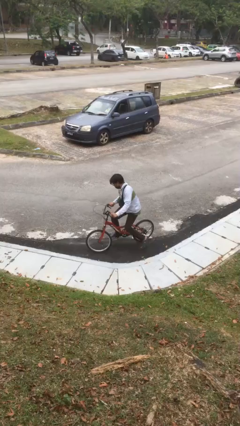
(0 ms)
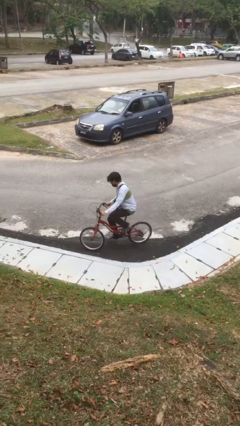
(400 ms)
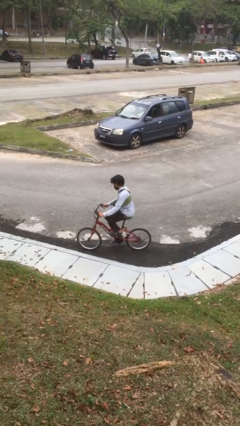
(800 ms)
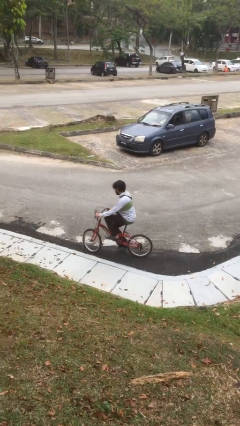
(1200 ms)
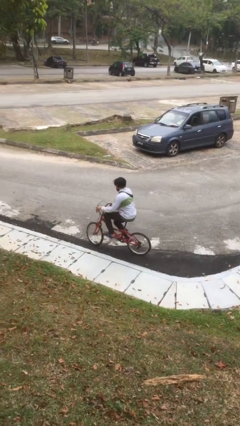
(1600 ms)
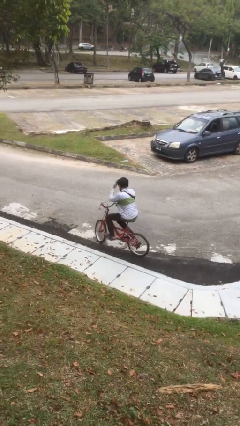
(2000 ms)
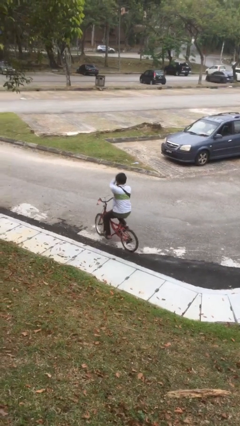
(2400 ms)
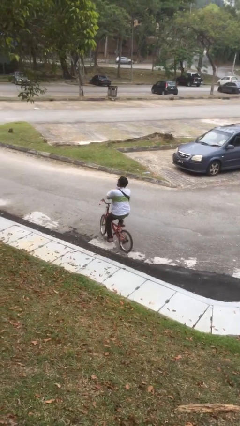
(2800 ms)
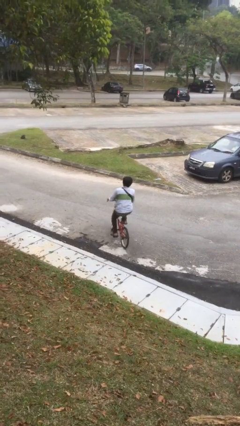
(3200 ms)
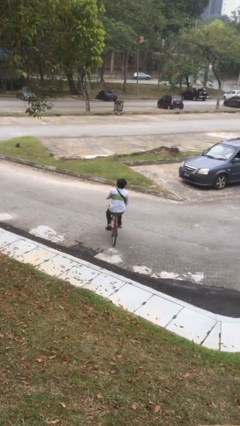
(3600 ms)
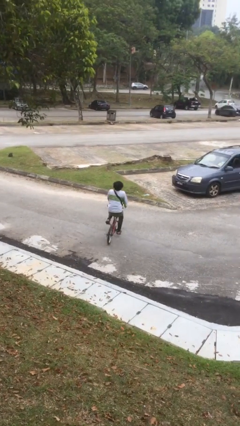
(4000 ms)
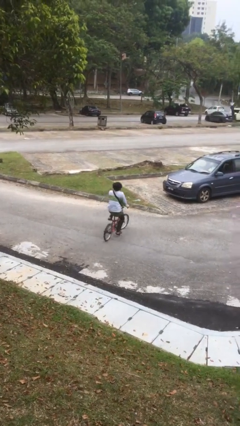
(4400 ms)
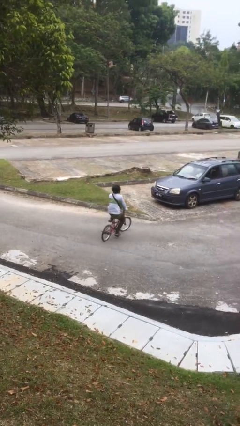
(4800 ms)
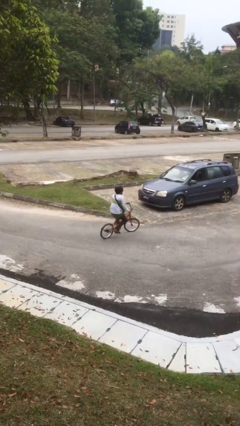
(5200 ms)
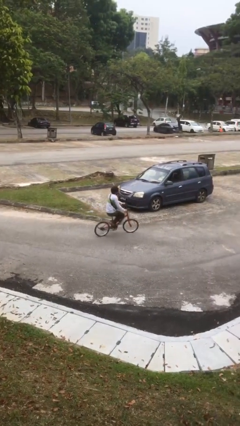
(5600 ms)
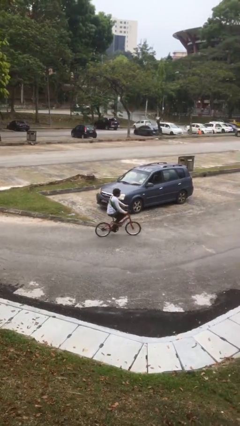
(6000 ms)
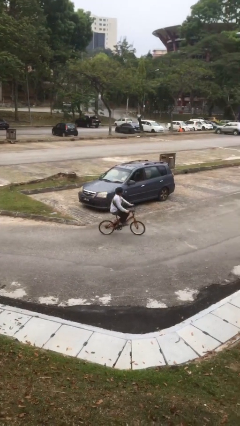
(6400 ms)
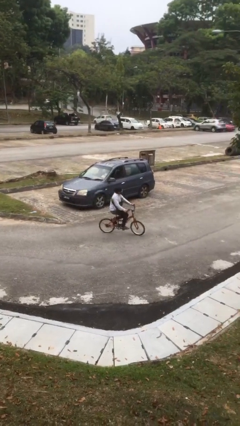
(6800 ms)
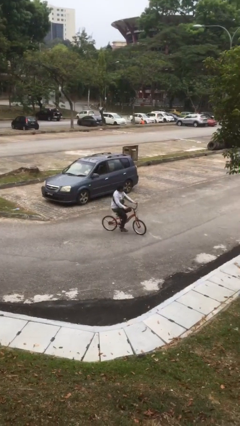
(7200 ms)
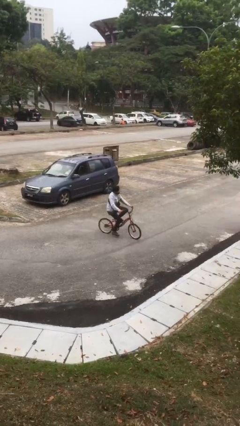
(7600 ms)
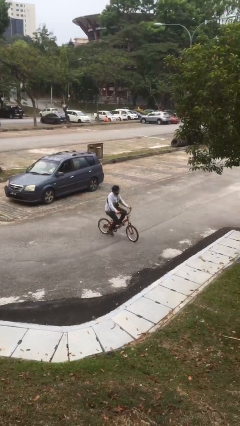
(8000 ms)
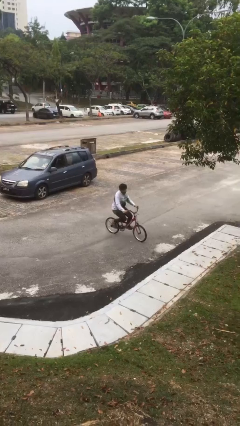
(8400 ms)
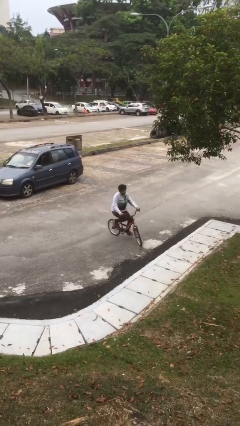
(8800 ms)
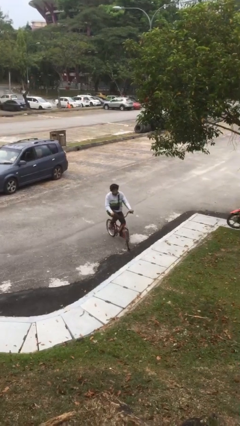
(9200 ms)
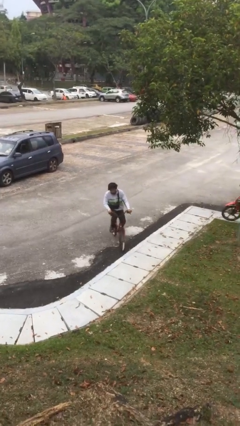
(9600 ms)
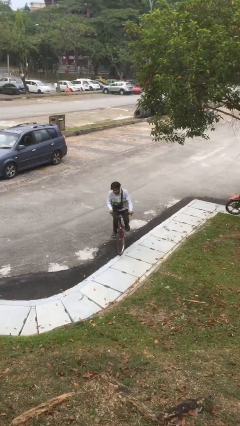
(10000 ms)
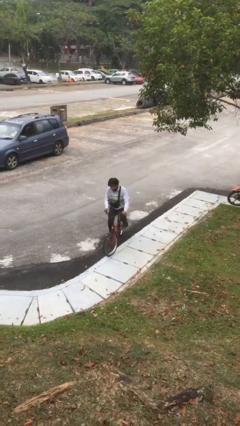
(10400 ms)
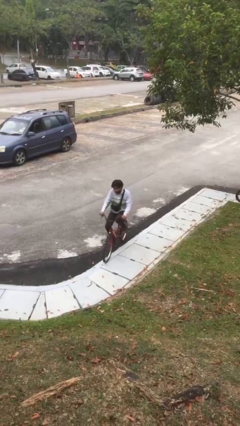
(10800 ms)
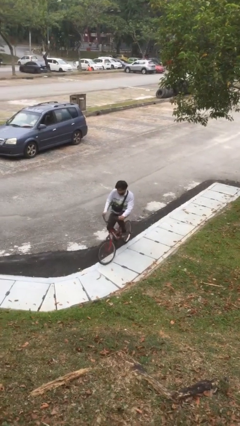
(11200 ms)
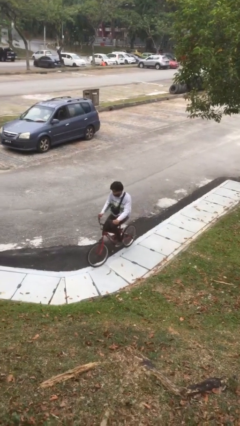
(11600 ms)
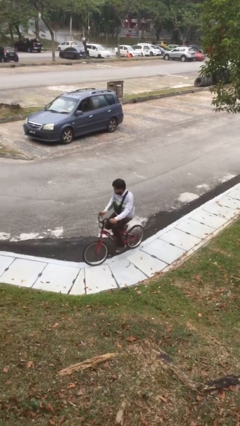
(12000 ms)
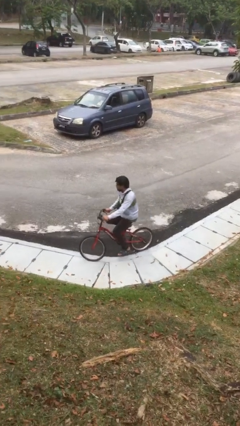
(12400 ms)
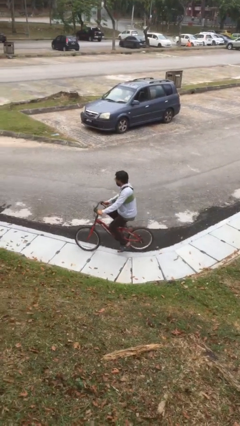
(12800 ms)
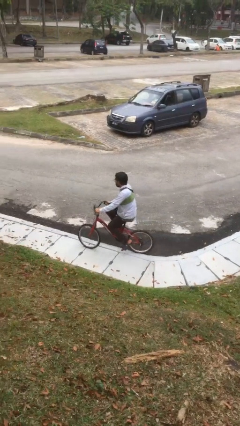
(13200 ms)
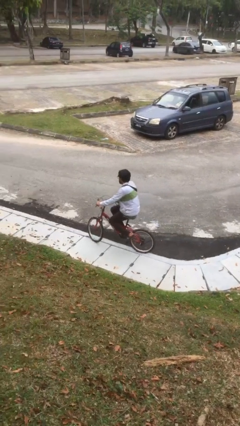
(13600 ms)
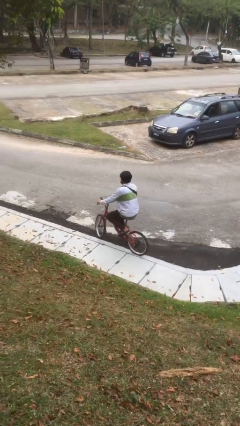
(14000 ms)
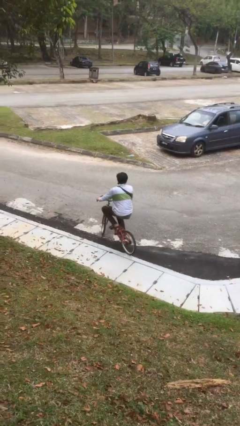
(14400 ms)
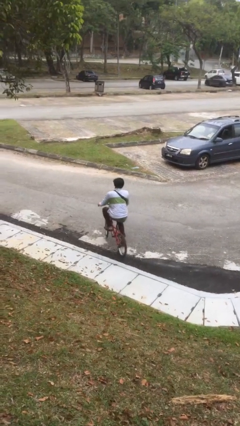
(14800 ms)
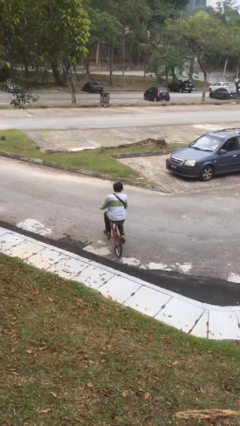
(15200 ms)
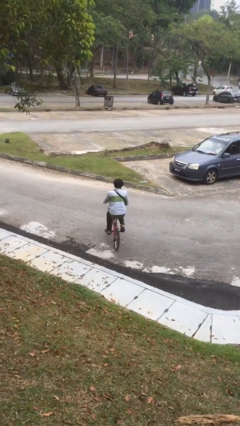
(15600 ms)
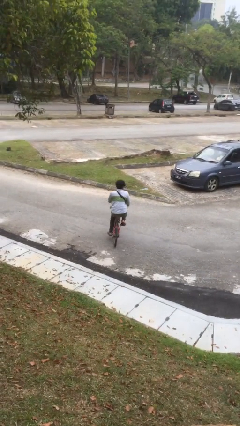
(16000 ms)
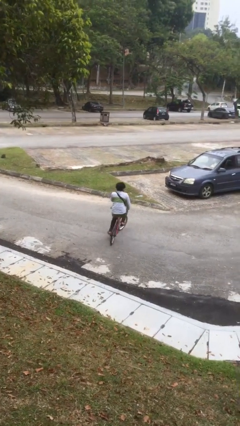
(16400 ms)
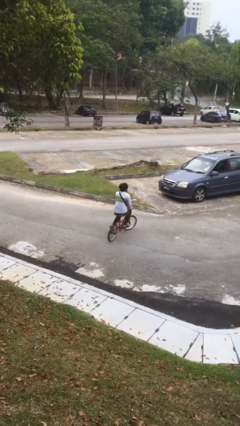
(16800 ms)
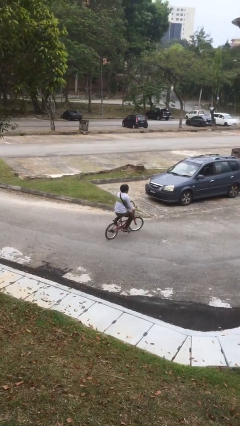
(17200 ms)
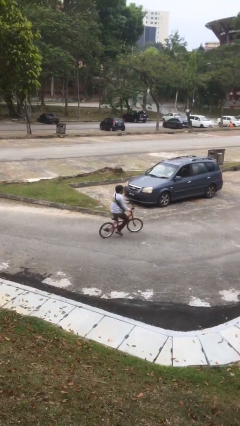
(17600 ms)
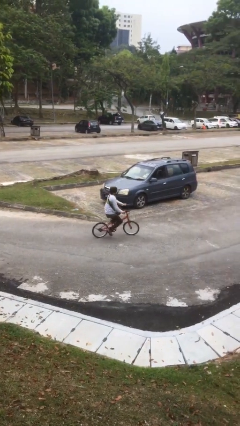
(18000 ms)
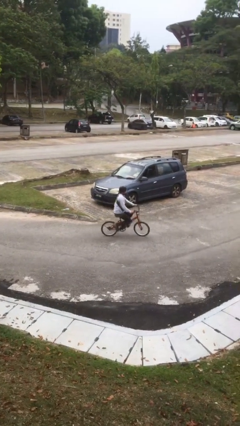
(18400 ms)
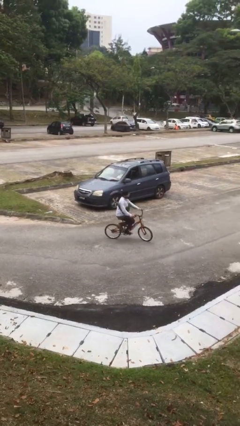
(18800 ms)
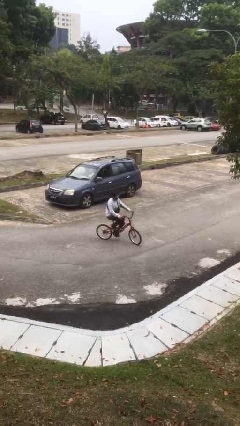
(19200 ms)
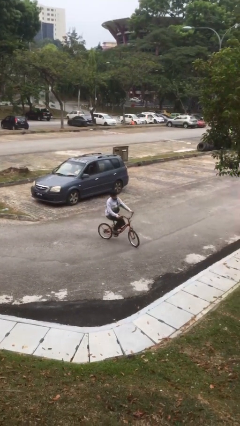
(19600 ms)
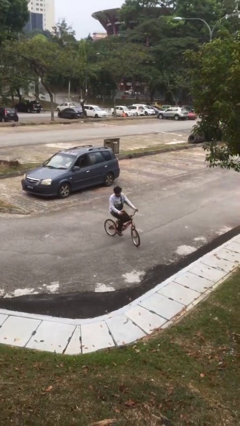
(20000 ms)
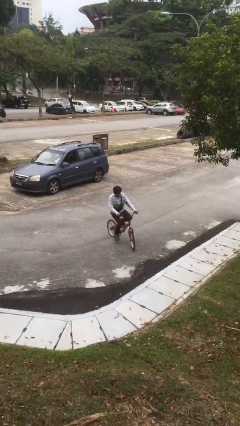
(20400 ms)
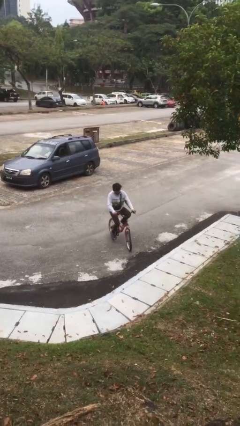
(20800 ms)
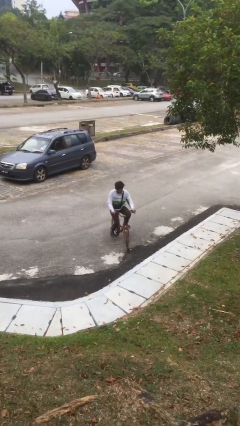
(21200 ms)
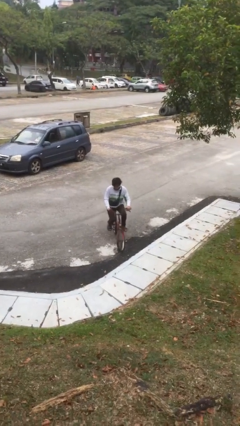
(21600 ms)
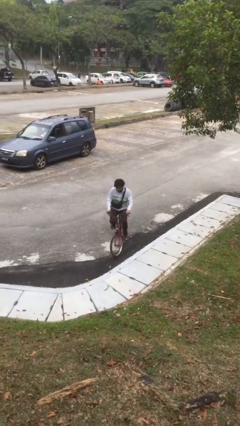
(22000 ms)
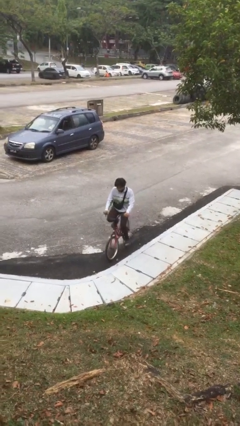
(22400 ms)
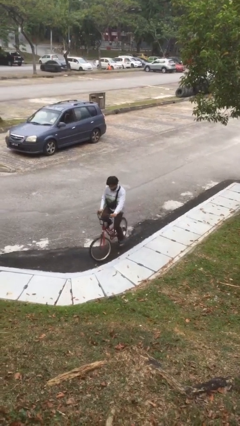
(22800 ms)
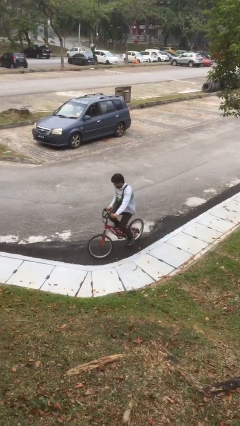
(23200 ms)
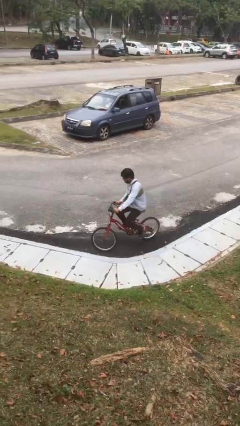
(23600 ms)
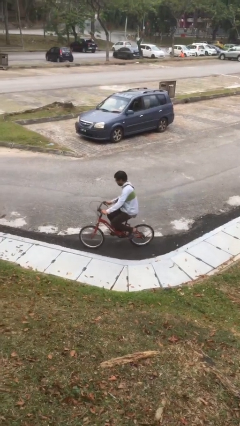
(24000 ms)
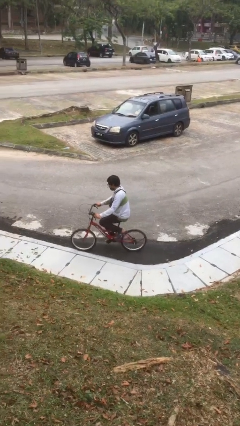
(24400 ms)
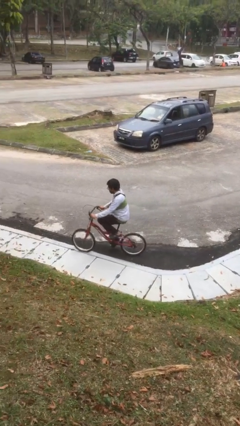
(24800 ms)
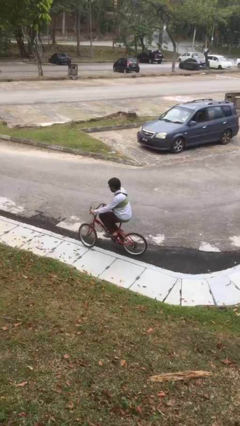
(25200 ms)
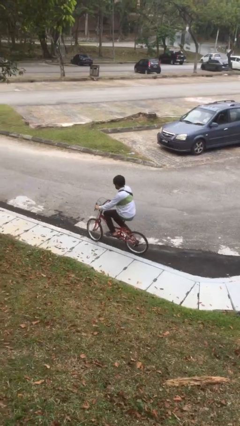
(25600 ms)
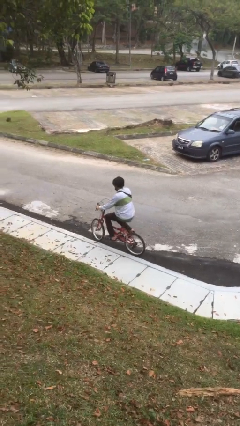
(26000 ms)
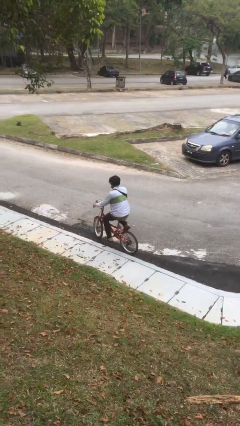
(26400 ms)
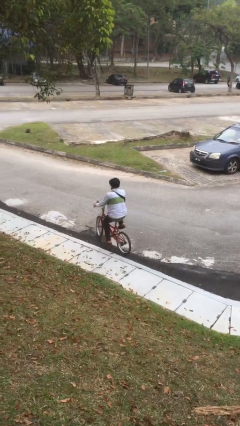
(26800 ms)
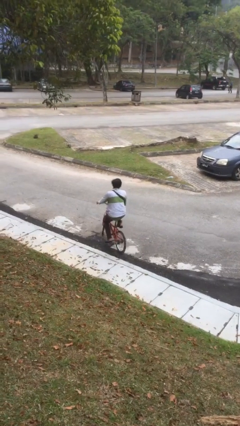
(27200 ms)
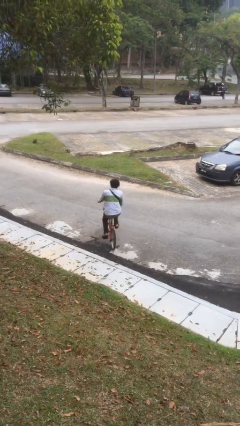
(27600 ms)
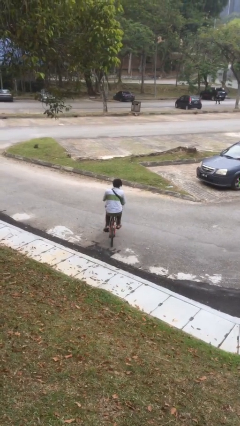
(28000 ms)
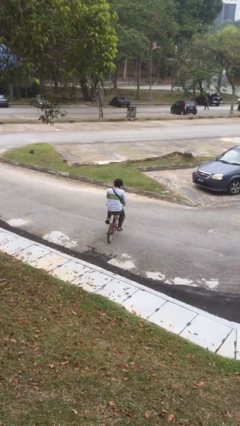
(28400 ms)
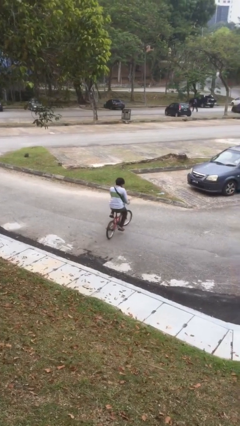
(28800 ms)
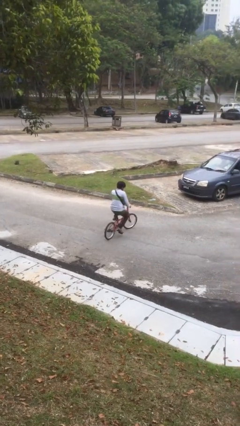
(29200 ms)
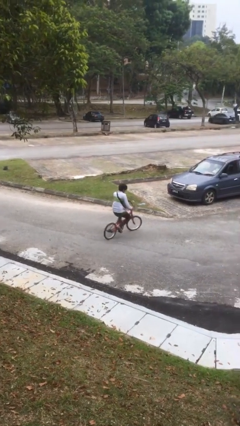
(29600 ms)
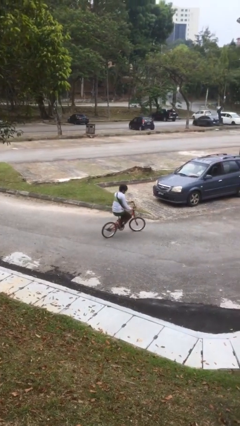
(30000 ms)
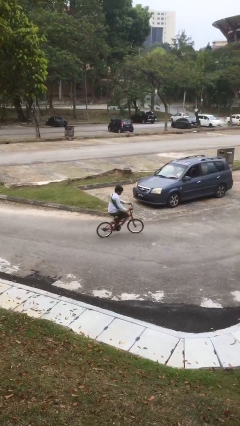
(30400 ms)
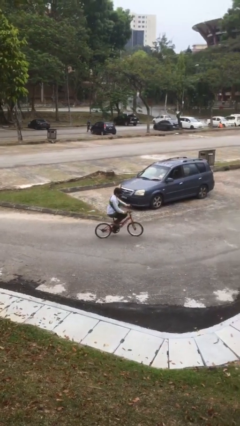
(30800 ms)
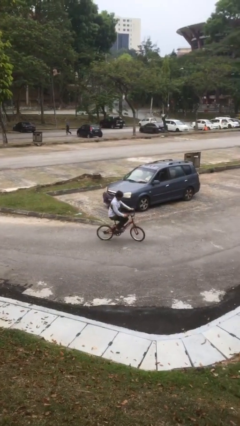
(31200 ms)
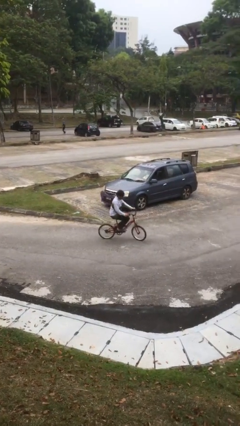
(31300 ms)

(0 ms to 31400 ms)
person rides bicycle

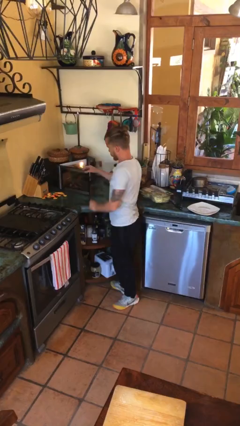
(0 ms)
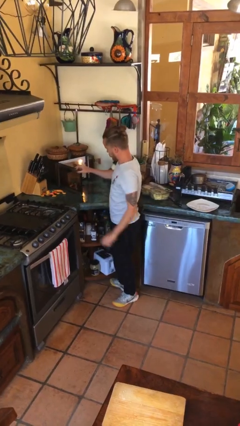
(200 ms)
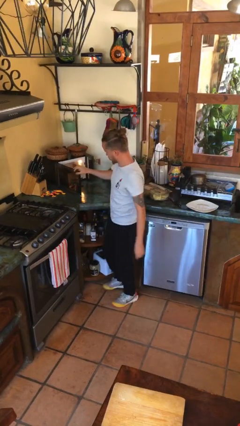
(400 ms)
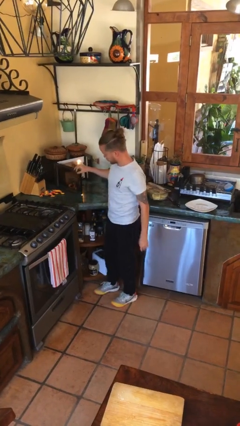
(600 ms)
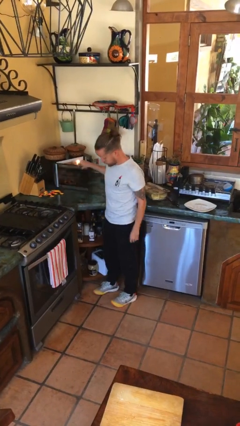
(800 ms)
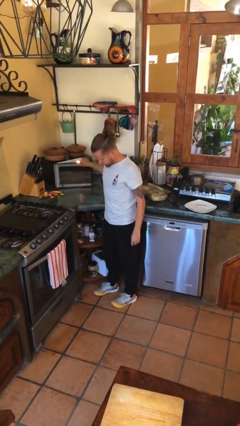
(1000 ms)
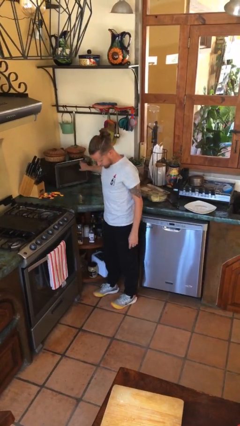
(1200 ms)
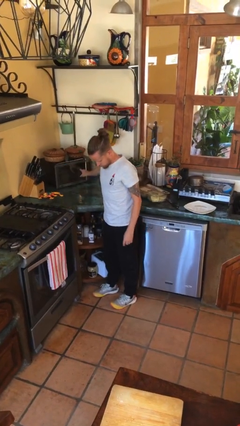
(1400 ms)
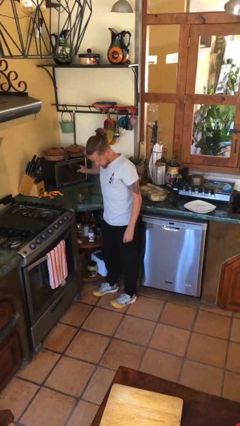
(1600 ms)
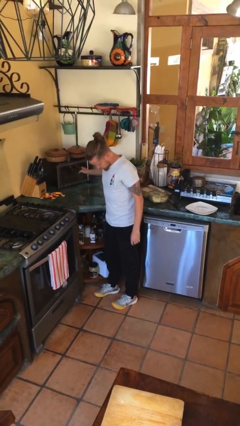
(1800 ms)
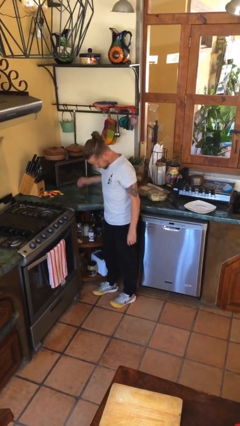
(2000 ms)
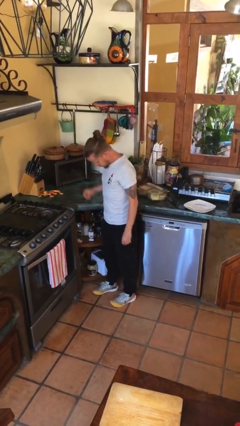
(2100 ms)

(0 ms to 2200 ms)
person closes microwave
